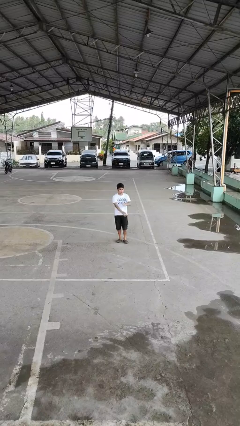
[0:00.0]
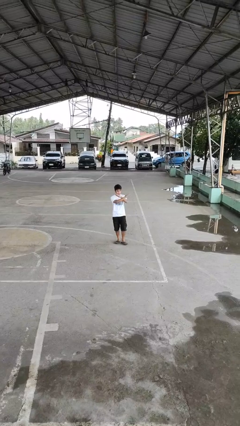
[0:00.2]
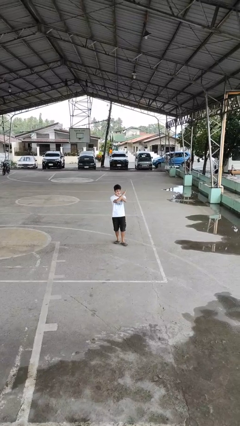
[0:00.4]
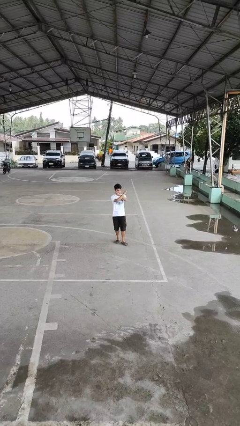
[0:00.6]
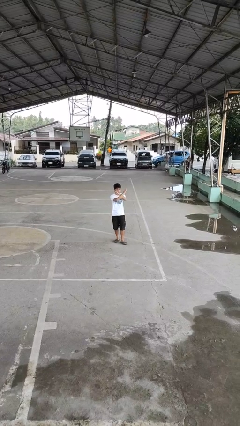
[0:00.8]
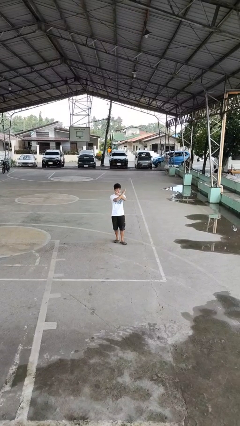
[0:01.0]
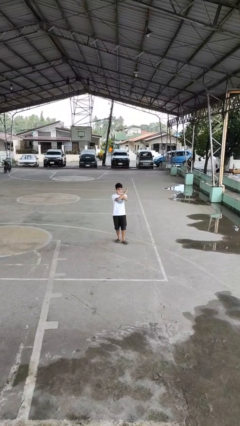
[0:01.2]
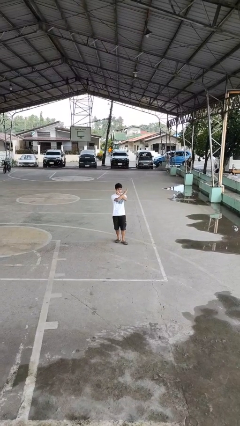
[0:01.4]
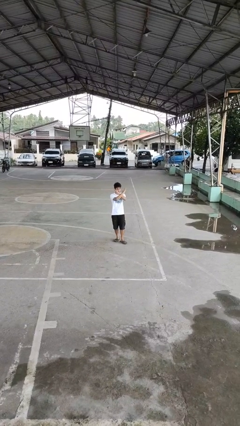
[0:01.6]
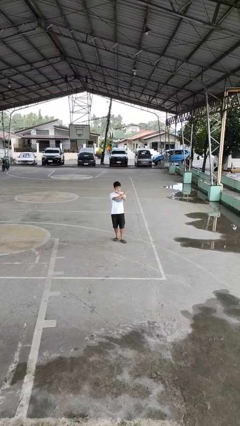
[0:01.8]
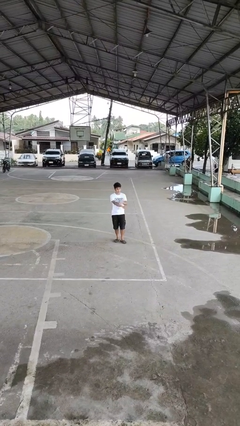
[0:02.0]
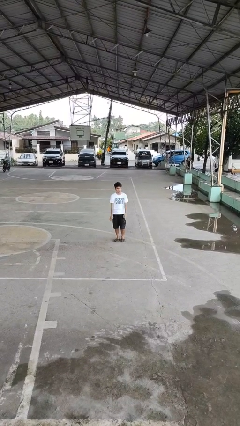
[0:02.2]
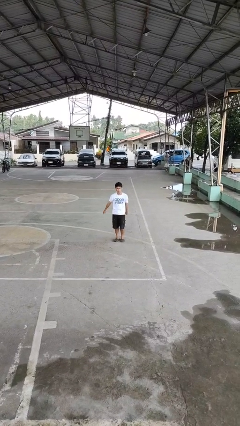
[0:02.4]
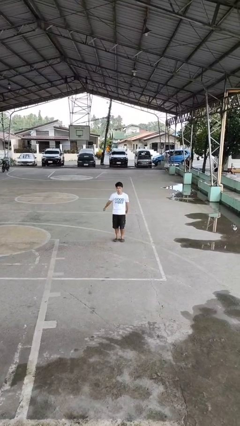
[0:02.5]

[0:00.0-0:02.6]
person gestures arms x

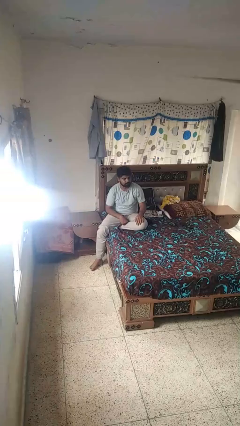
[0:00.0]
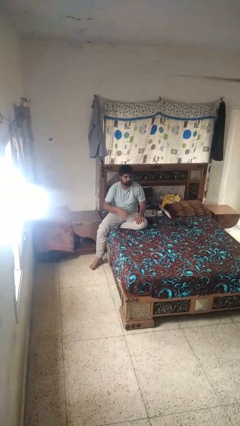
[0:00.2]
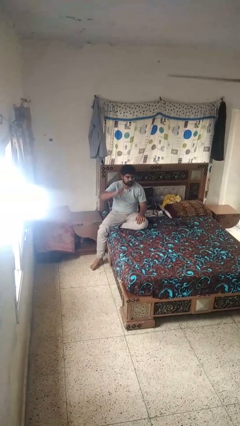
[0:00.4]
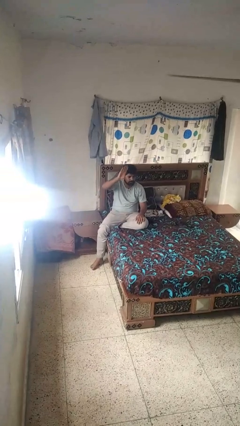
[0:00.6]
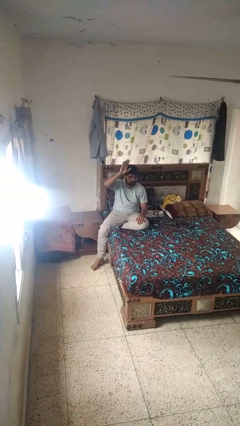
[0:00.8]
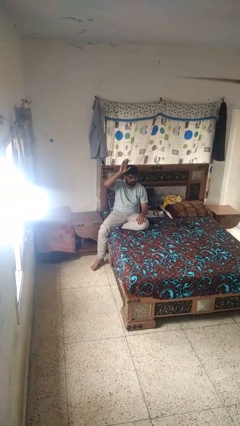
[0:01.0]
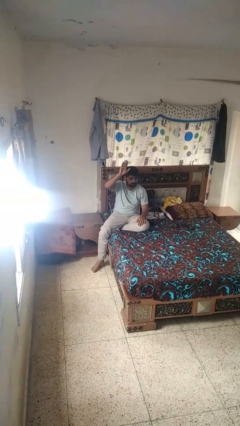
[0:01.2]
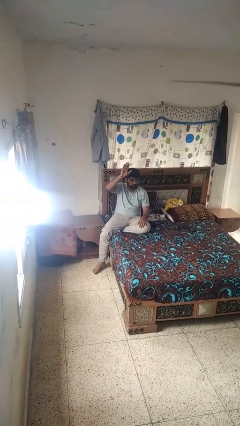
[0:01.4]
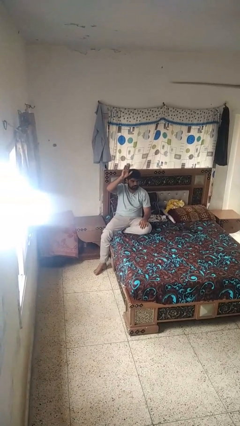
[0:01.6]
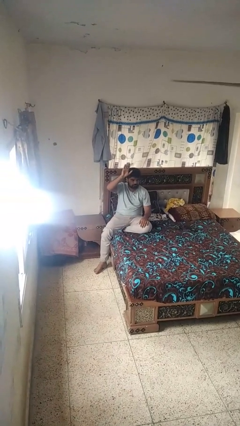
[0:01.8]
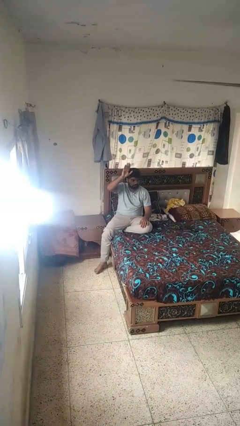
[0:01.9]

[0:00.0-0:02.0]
person gestures raise hand

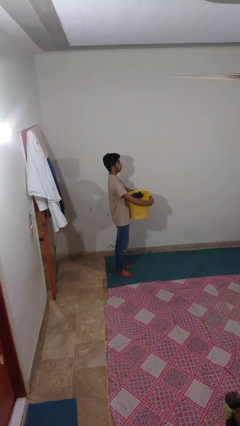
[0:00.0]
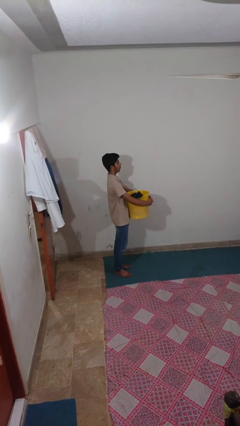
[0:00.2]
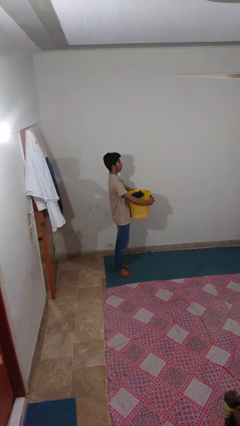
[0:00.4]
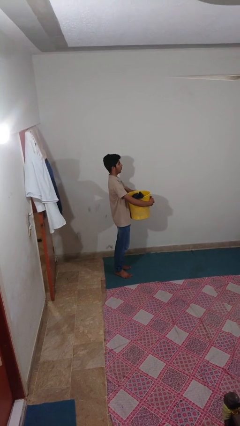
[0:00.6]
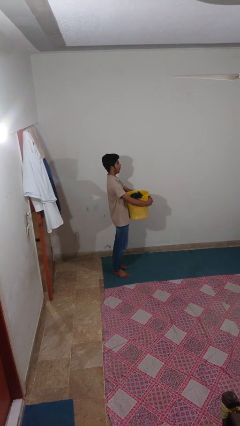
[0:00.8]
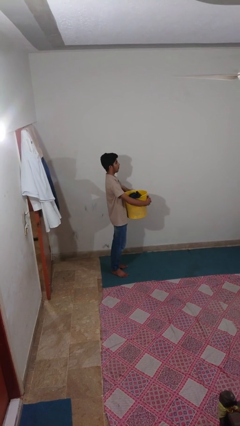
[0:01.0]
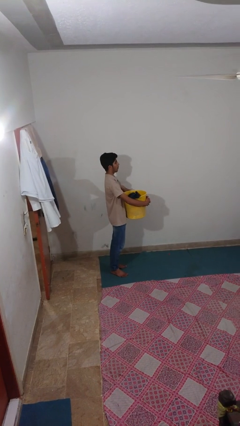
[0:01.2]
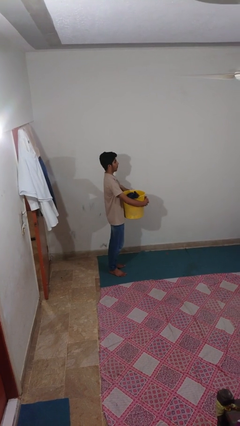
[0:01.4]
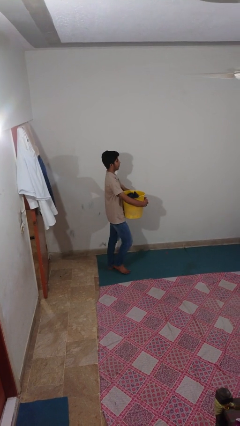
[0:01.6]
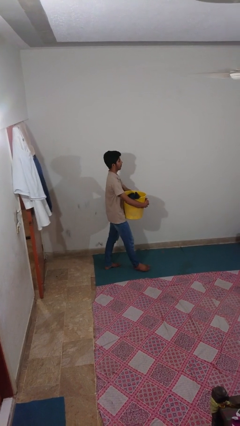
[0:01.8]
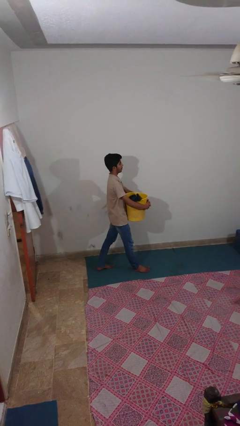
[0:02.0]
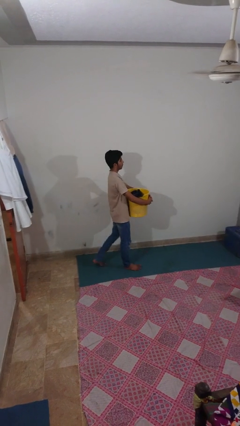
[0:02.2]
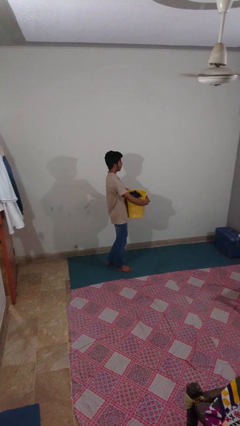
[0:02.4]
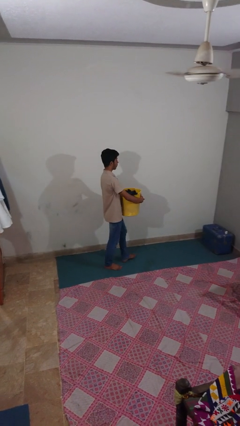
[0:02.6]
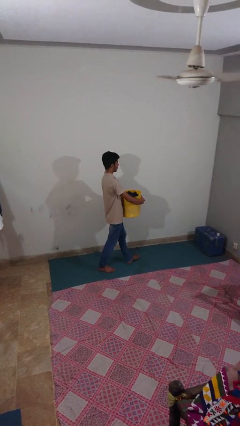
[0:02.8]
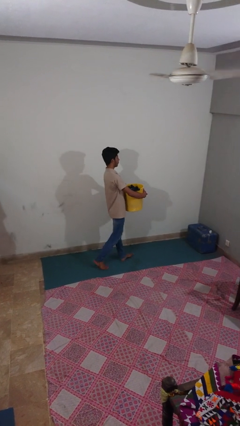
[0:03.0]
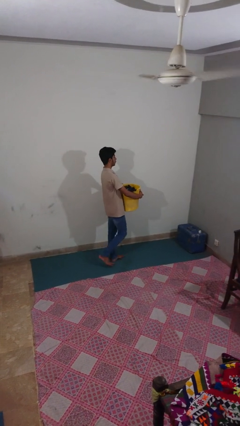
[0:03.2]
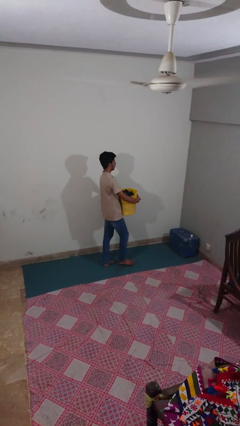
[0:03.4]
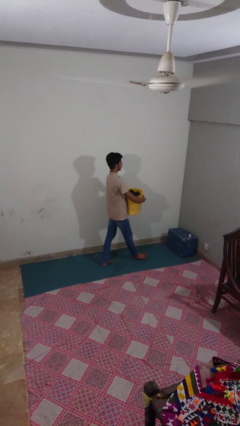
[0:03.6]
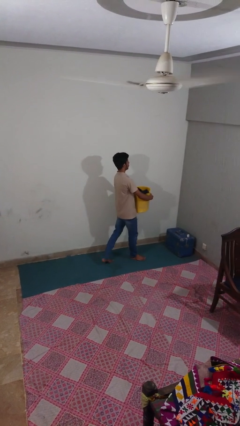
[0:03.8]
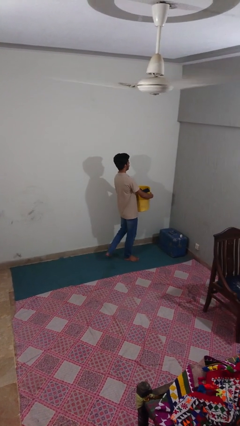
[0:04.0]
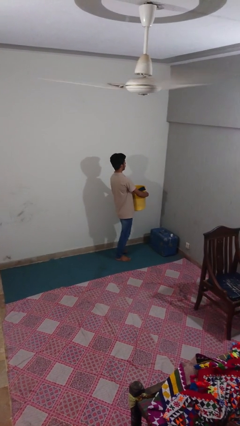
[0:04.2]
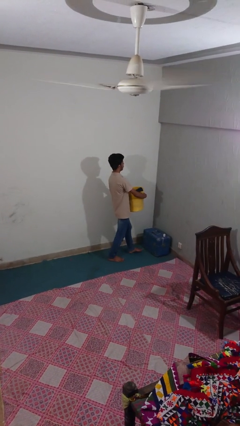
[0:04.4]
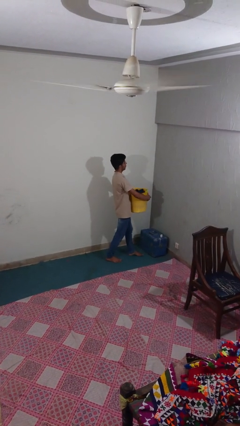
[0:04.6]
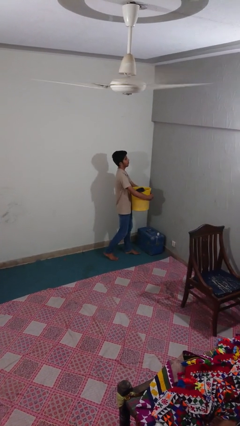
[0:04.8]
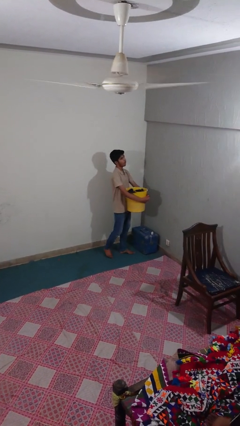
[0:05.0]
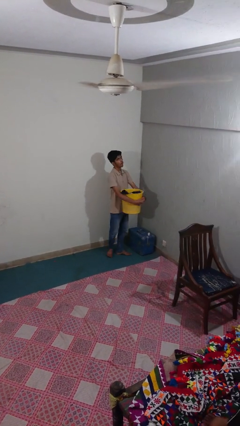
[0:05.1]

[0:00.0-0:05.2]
person carries laundry basket

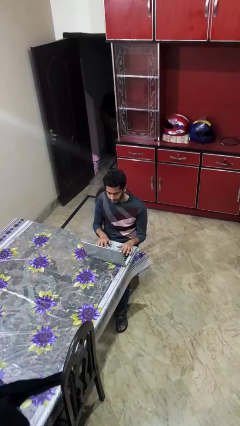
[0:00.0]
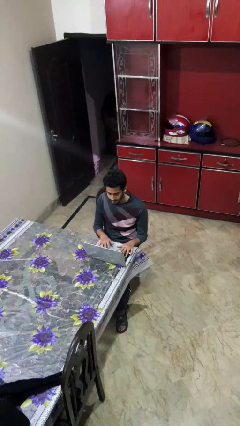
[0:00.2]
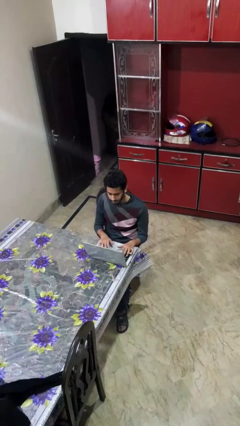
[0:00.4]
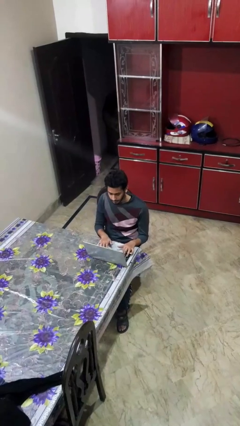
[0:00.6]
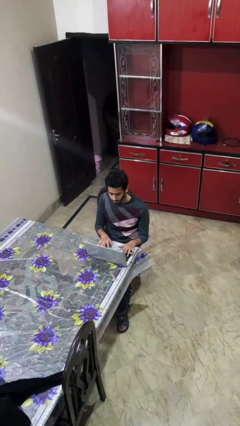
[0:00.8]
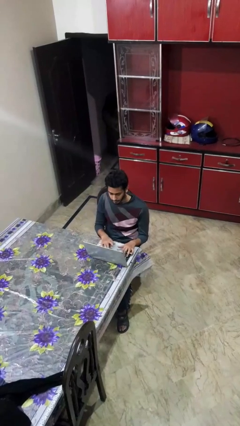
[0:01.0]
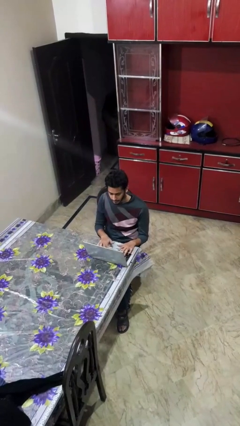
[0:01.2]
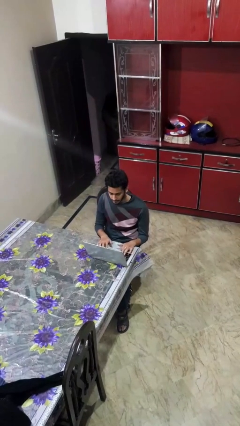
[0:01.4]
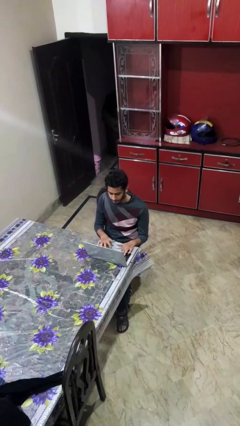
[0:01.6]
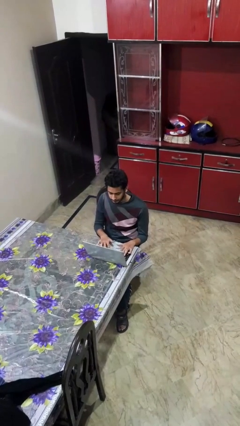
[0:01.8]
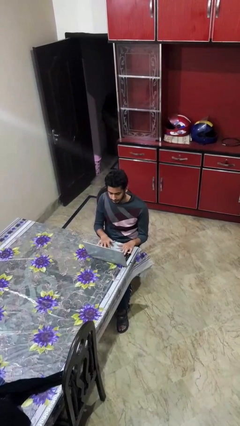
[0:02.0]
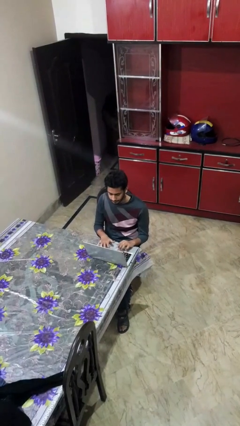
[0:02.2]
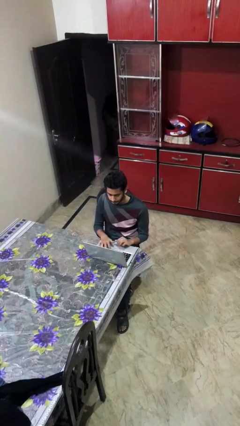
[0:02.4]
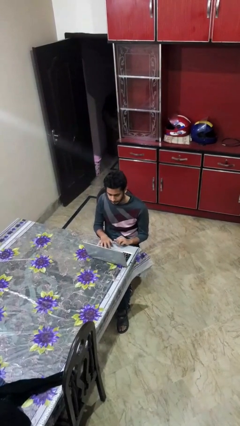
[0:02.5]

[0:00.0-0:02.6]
person interacts with laptop

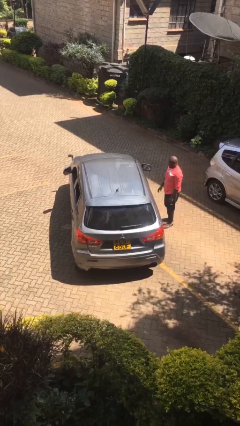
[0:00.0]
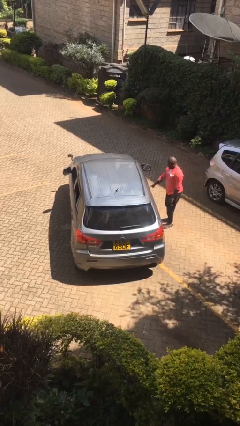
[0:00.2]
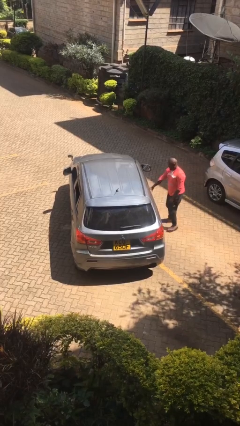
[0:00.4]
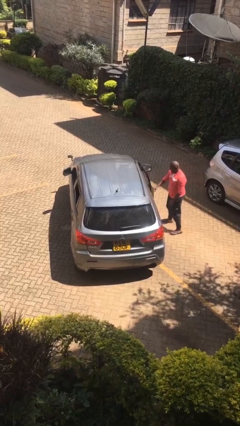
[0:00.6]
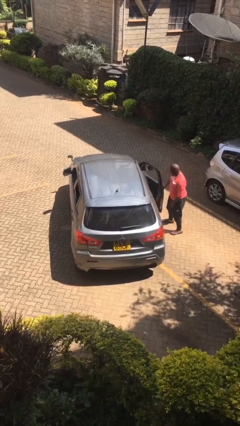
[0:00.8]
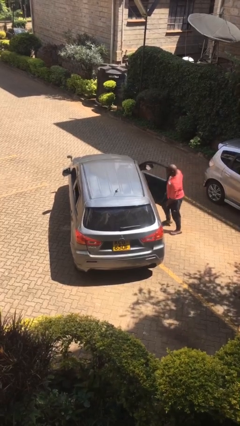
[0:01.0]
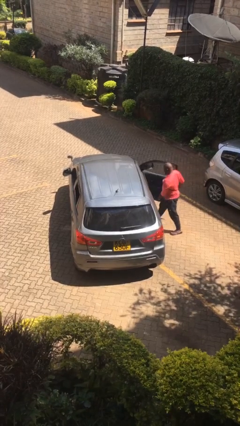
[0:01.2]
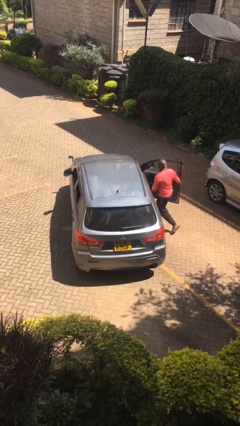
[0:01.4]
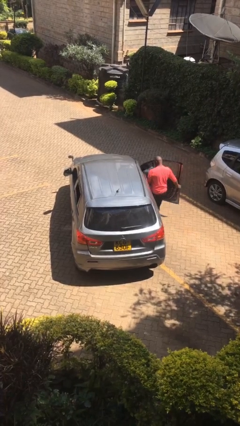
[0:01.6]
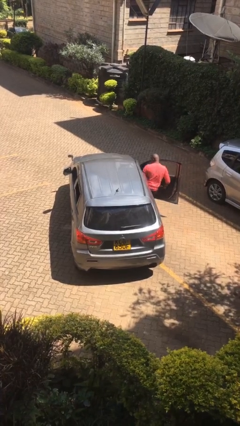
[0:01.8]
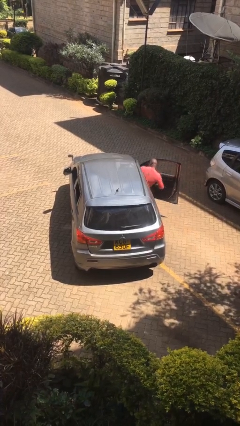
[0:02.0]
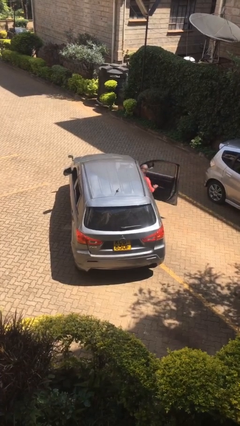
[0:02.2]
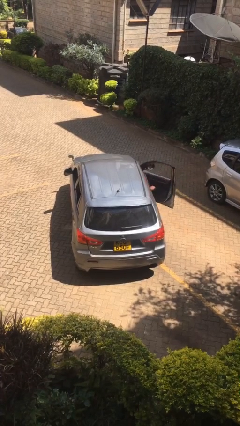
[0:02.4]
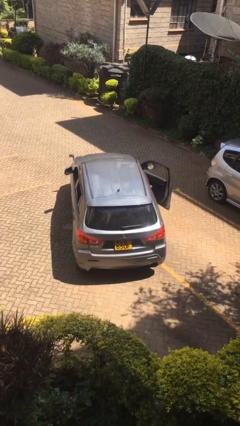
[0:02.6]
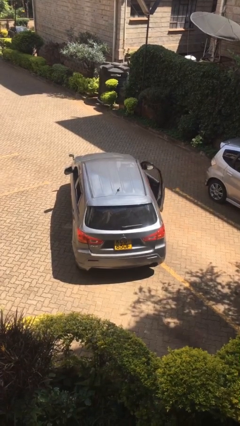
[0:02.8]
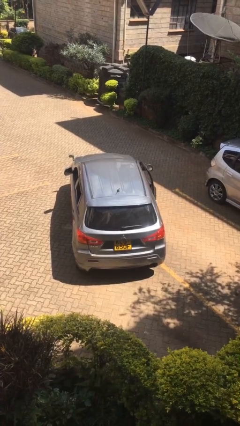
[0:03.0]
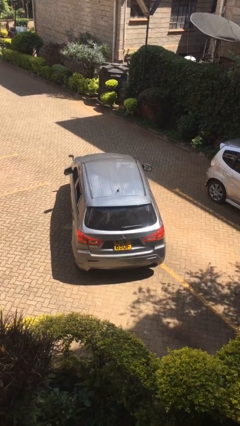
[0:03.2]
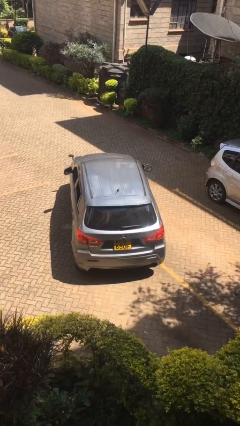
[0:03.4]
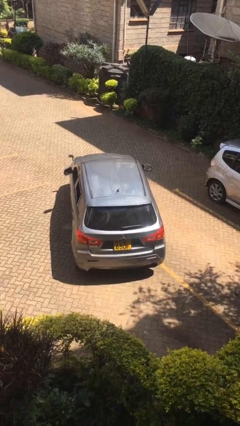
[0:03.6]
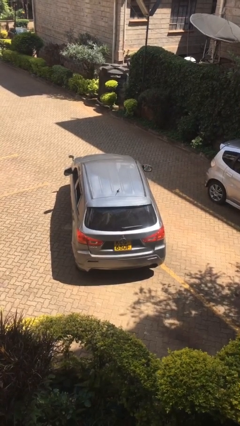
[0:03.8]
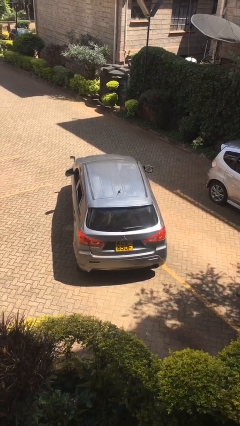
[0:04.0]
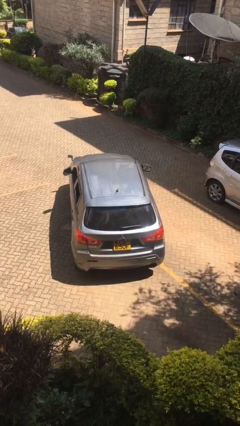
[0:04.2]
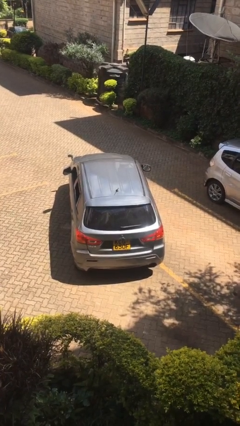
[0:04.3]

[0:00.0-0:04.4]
car picks up person

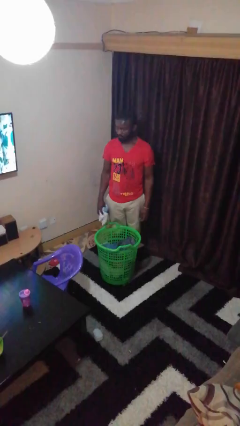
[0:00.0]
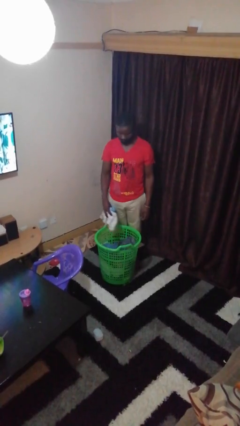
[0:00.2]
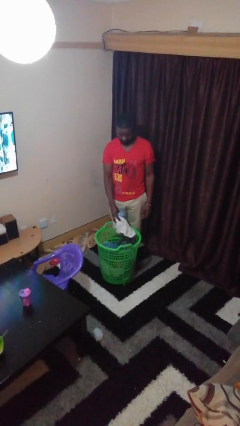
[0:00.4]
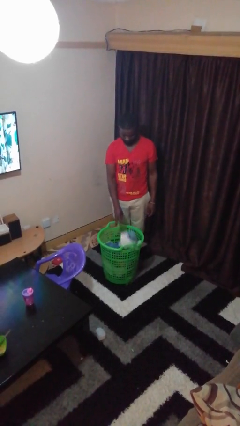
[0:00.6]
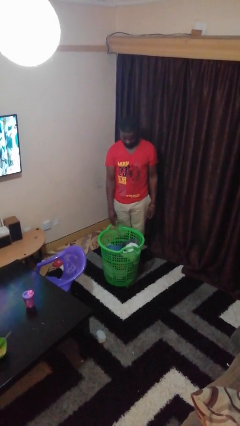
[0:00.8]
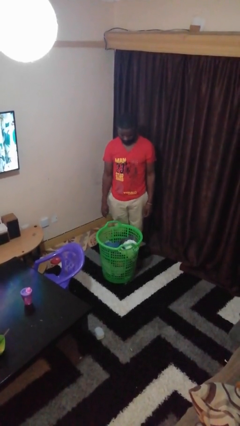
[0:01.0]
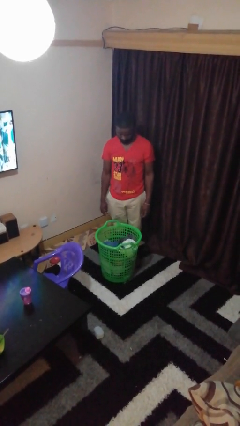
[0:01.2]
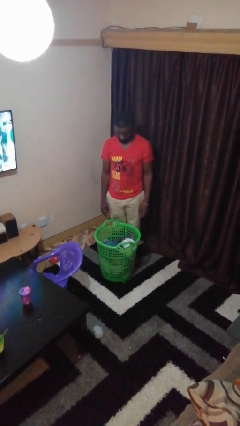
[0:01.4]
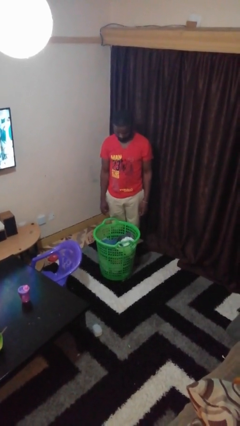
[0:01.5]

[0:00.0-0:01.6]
person puts object into basket
